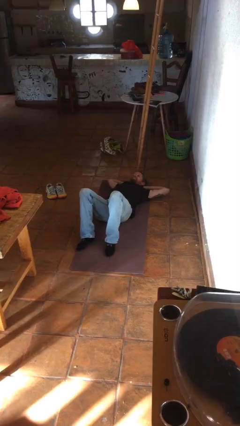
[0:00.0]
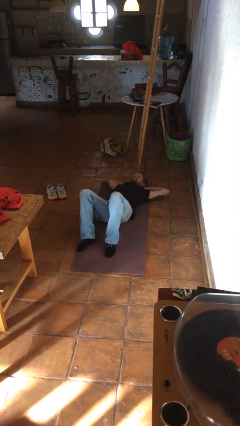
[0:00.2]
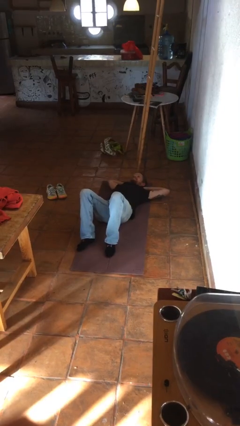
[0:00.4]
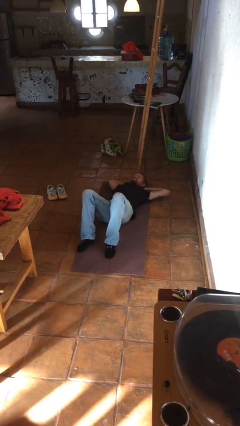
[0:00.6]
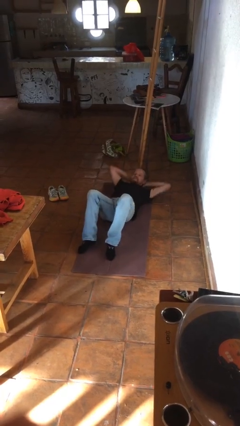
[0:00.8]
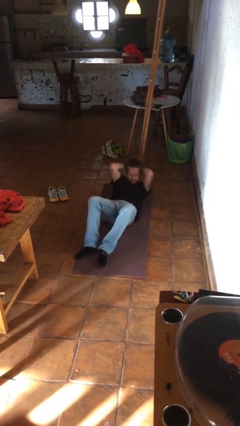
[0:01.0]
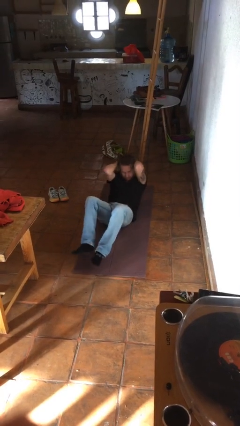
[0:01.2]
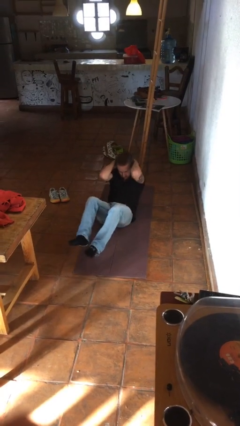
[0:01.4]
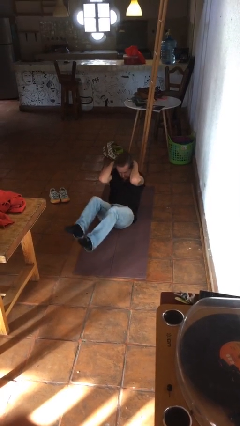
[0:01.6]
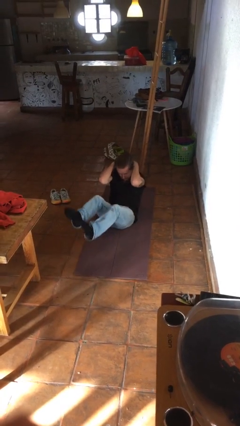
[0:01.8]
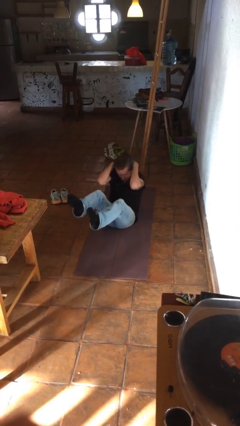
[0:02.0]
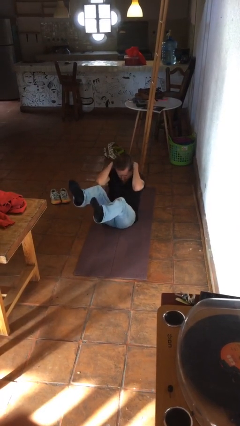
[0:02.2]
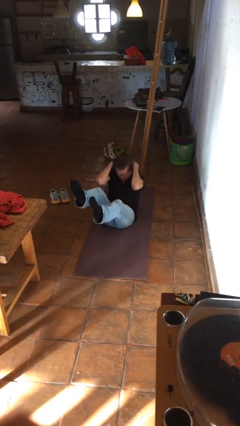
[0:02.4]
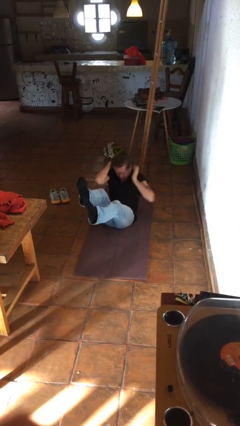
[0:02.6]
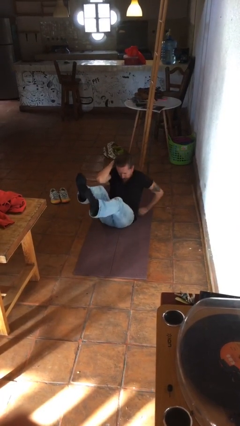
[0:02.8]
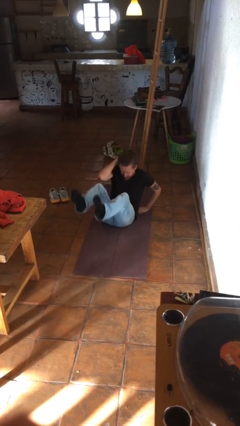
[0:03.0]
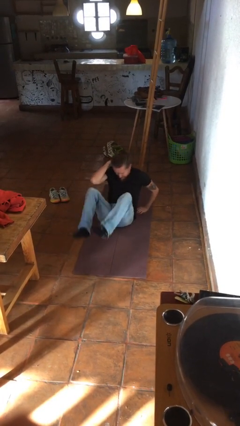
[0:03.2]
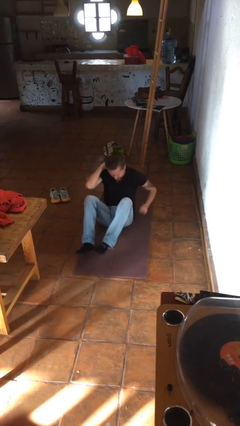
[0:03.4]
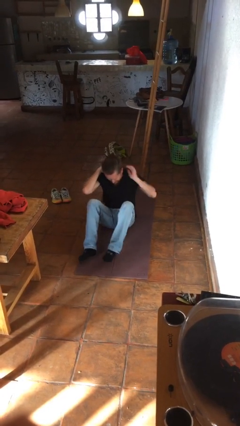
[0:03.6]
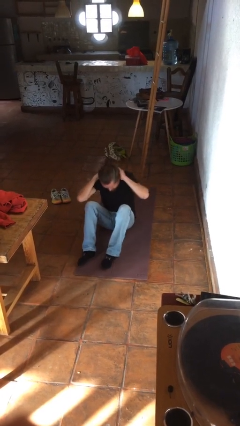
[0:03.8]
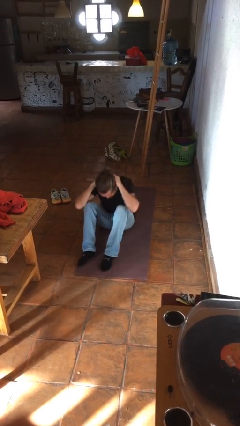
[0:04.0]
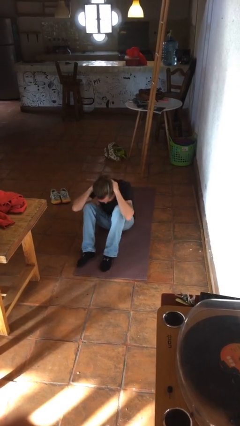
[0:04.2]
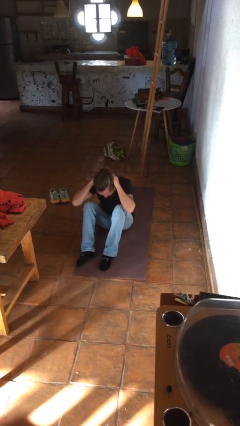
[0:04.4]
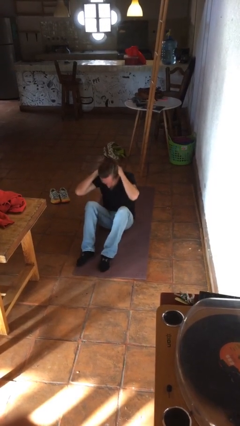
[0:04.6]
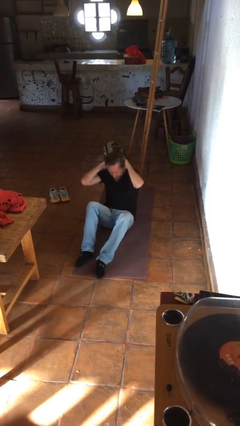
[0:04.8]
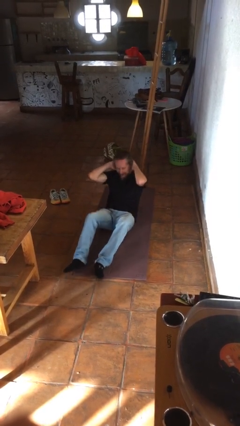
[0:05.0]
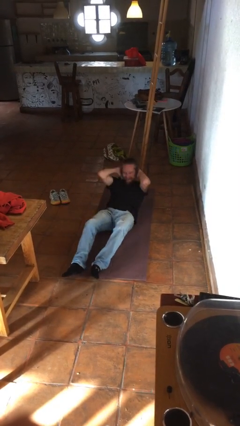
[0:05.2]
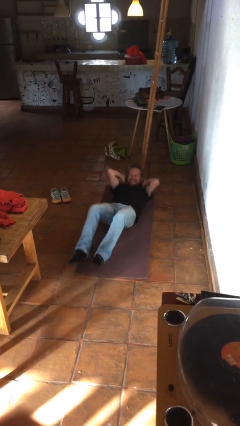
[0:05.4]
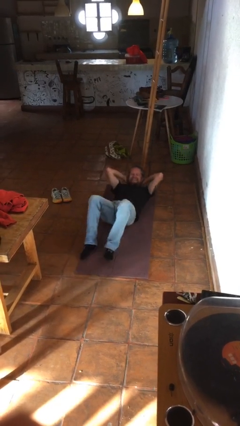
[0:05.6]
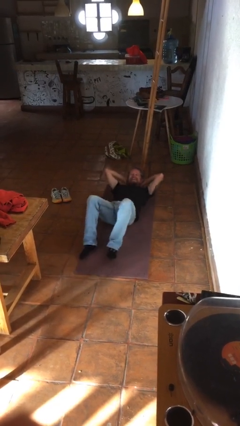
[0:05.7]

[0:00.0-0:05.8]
person exercises with situp

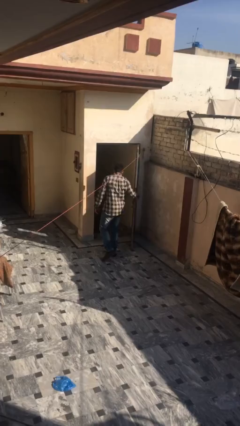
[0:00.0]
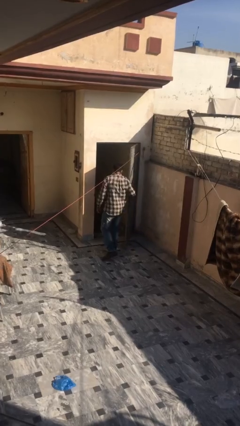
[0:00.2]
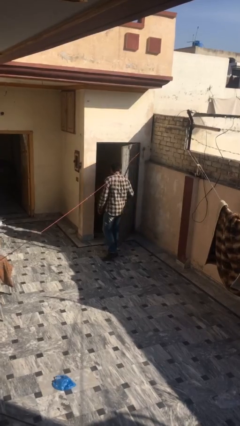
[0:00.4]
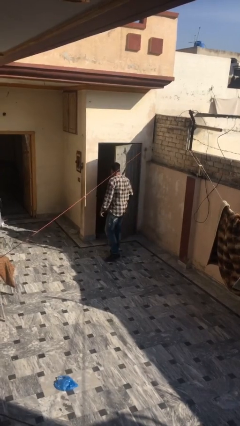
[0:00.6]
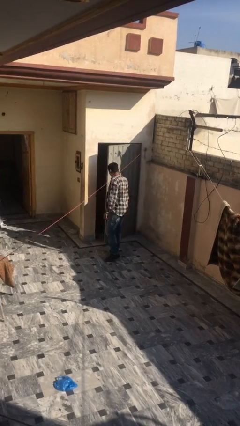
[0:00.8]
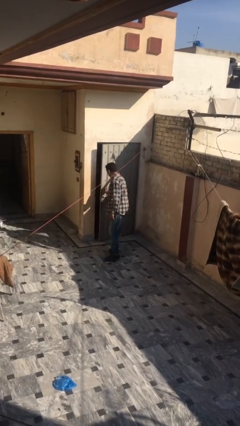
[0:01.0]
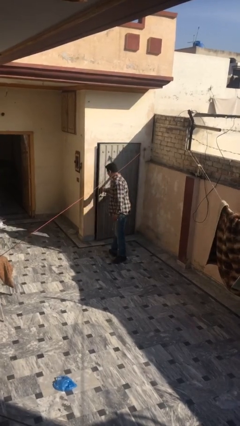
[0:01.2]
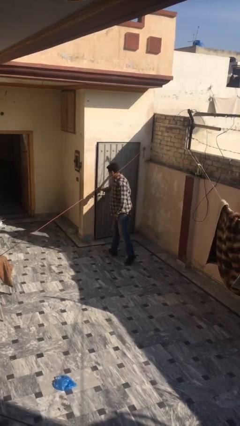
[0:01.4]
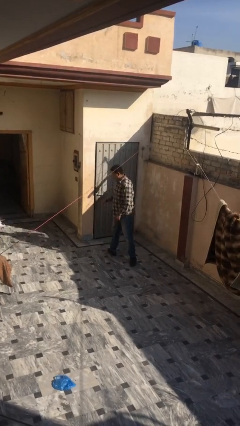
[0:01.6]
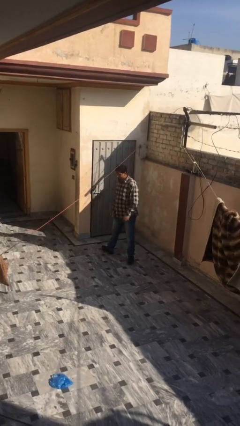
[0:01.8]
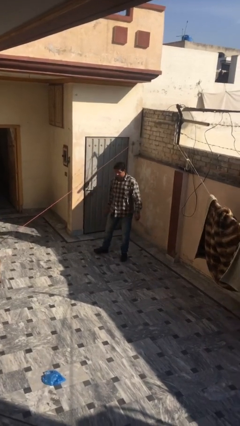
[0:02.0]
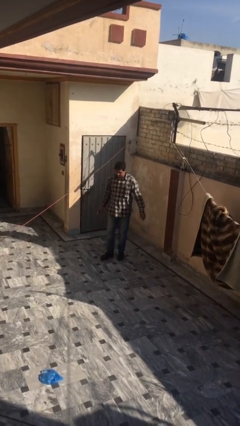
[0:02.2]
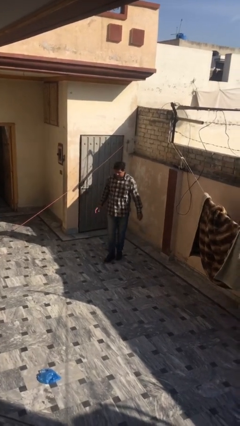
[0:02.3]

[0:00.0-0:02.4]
person closes facility door

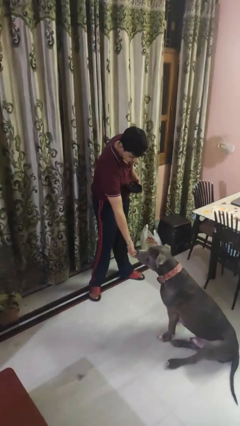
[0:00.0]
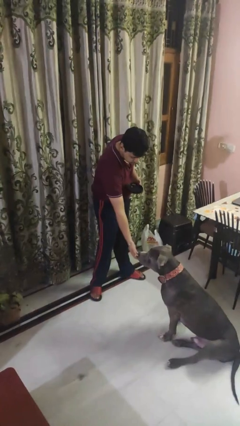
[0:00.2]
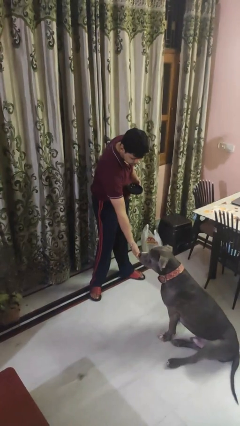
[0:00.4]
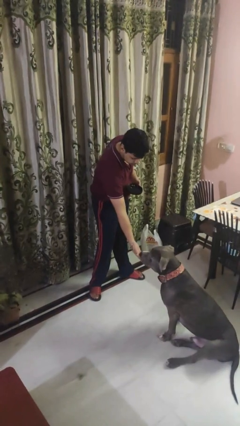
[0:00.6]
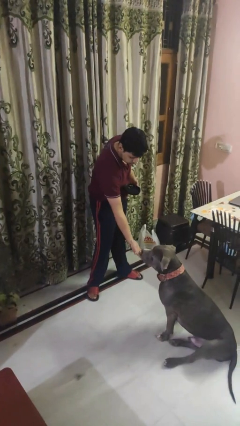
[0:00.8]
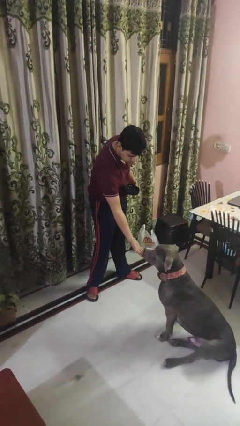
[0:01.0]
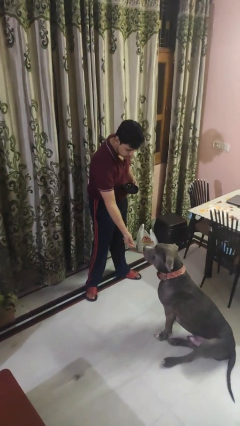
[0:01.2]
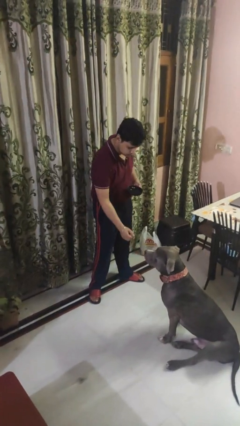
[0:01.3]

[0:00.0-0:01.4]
person feeds dog

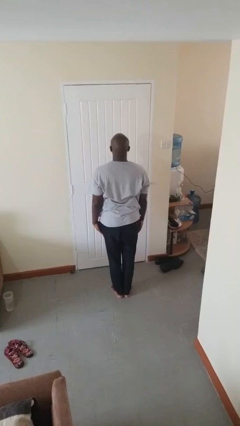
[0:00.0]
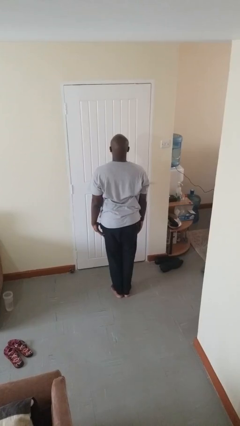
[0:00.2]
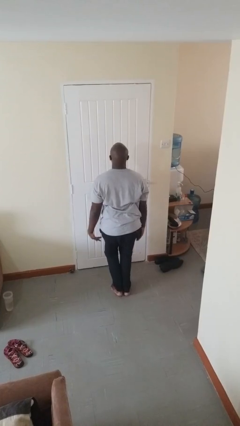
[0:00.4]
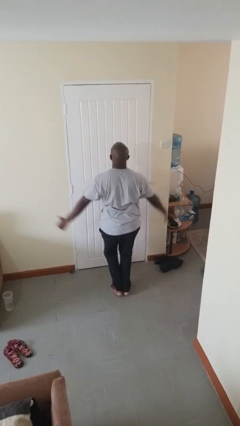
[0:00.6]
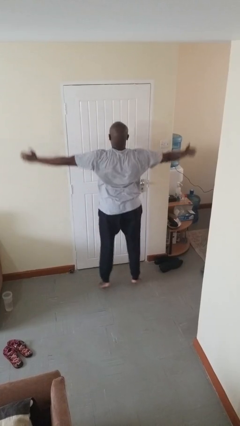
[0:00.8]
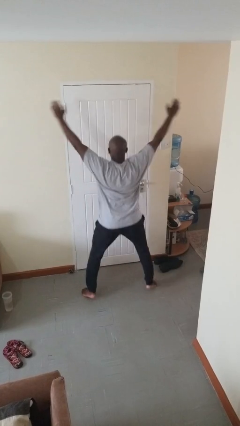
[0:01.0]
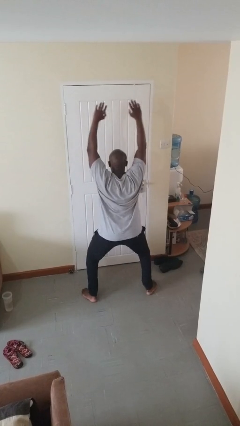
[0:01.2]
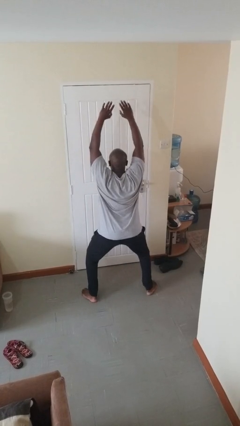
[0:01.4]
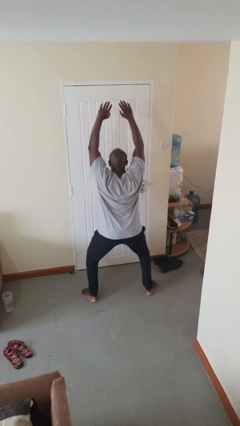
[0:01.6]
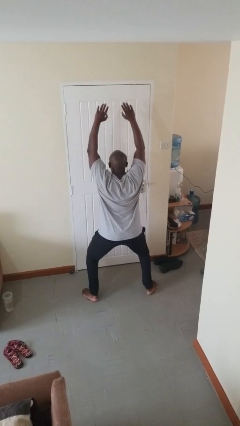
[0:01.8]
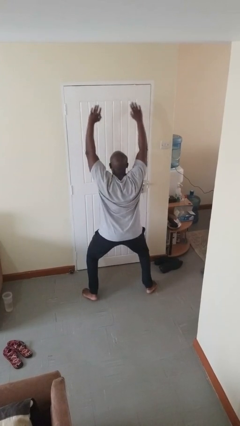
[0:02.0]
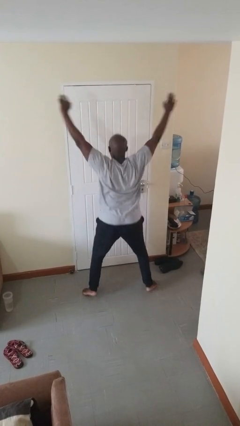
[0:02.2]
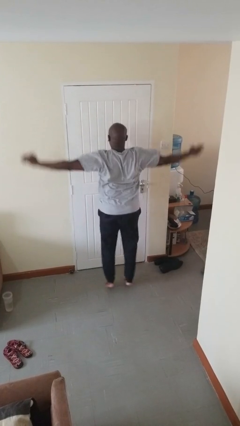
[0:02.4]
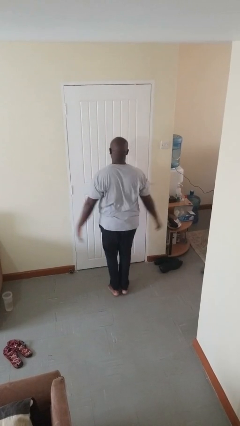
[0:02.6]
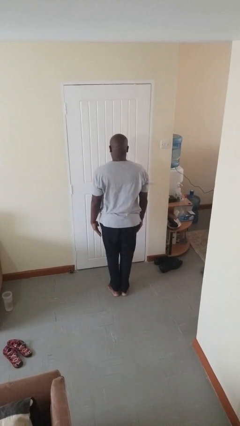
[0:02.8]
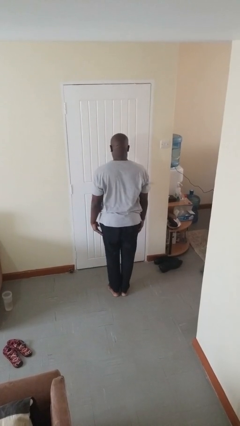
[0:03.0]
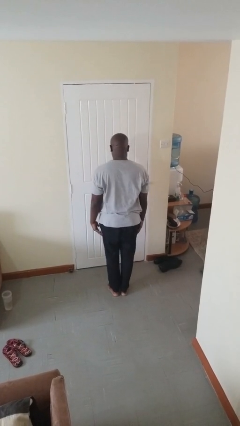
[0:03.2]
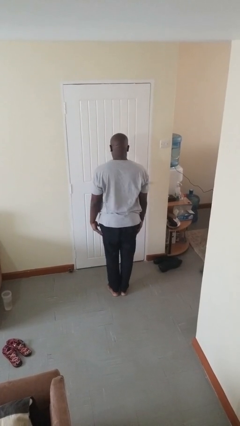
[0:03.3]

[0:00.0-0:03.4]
person exercises with jumping jacks

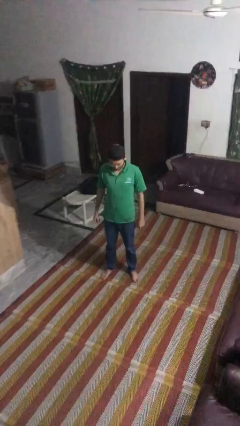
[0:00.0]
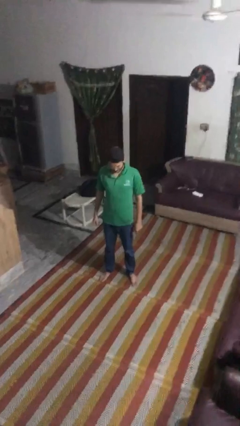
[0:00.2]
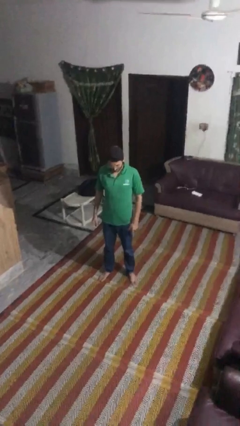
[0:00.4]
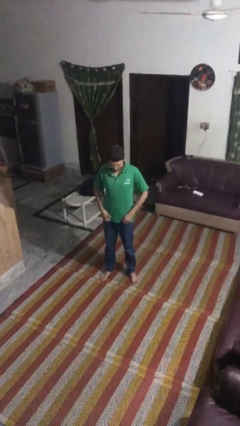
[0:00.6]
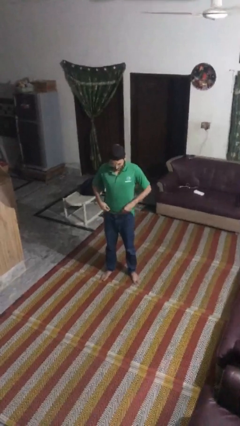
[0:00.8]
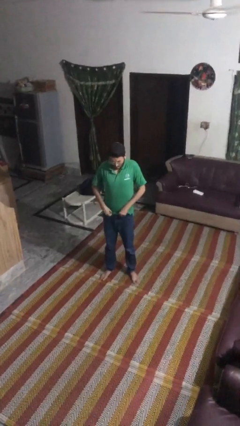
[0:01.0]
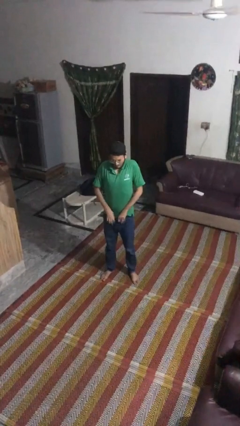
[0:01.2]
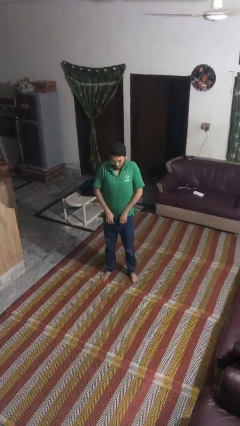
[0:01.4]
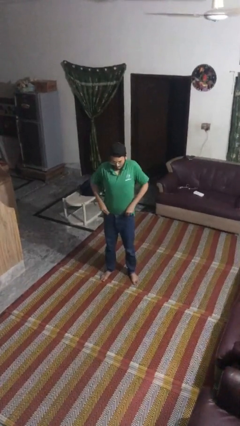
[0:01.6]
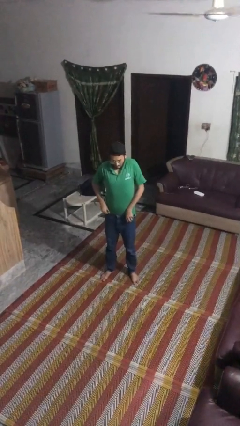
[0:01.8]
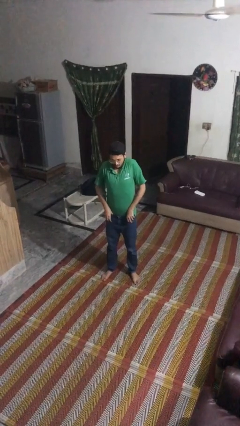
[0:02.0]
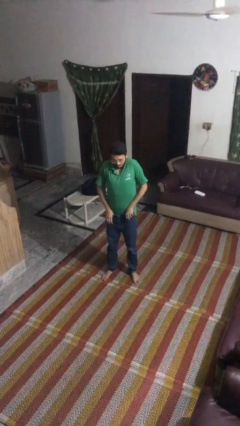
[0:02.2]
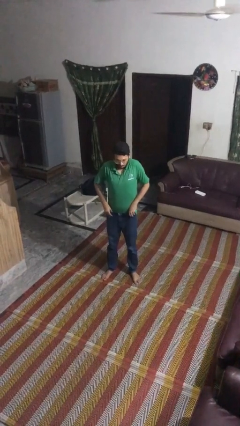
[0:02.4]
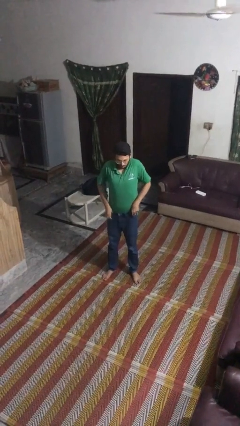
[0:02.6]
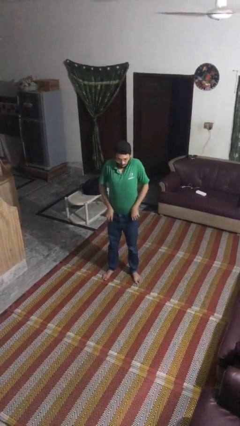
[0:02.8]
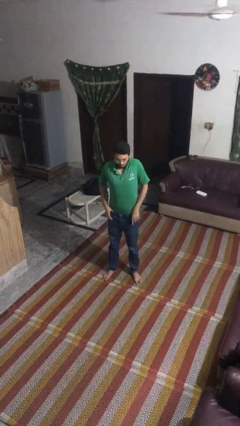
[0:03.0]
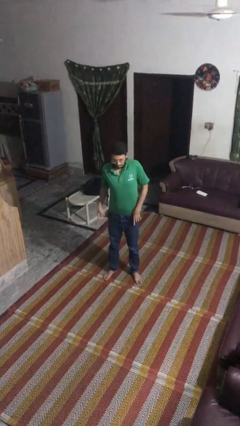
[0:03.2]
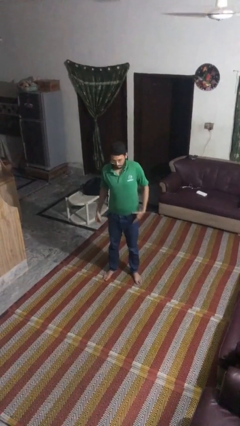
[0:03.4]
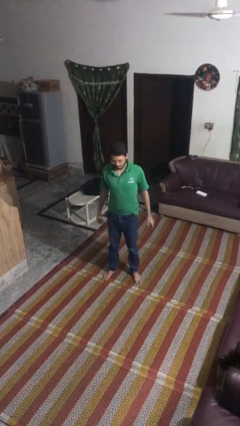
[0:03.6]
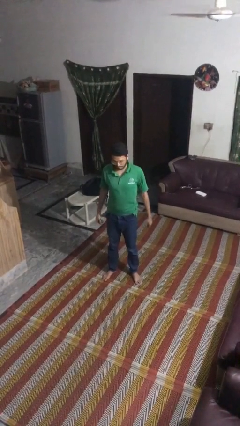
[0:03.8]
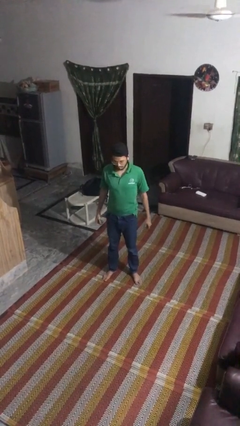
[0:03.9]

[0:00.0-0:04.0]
person tucks in shirt

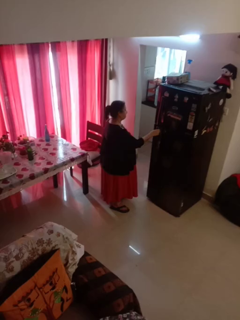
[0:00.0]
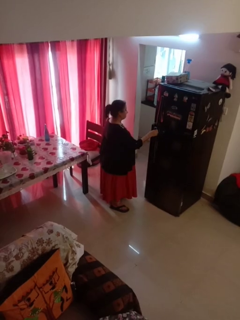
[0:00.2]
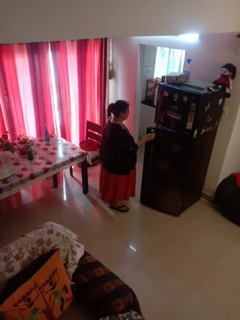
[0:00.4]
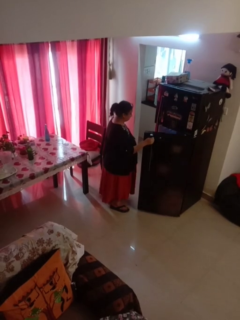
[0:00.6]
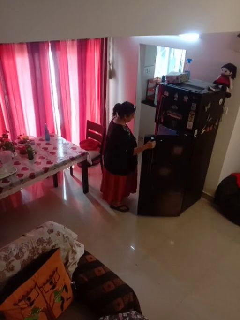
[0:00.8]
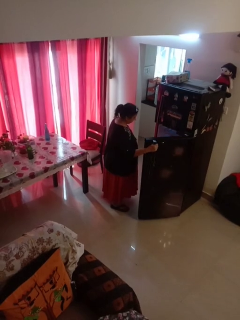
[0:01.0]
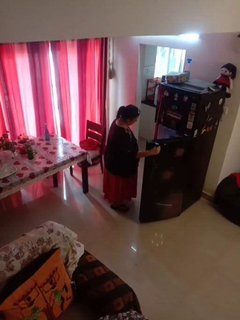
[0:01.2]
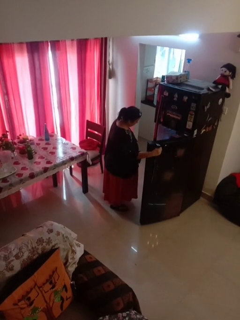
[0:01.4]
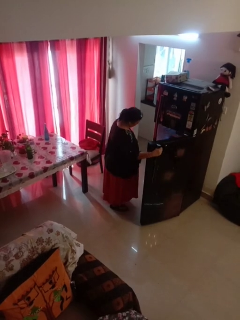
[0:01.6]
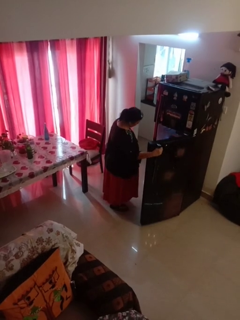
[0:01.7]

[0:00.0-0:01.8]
person opens refrigerator
